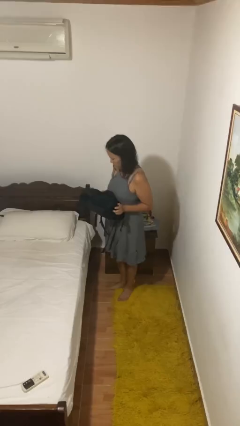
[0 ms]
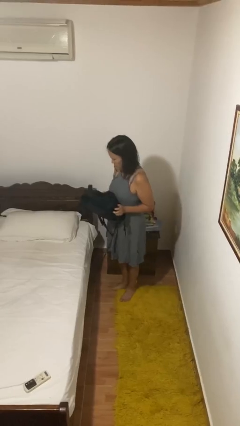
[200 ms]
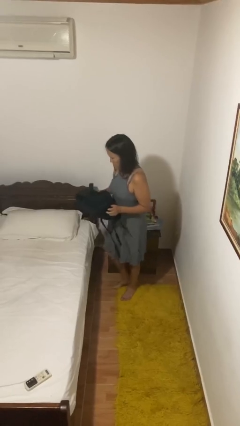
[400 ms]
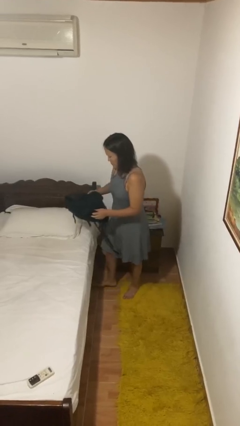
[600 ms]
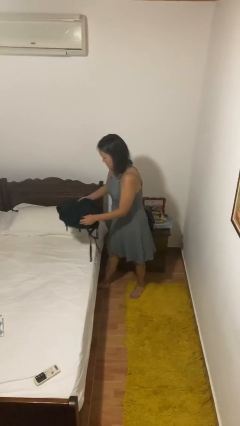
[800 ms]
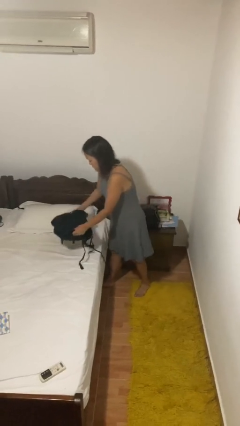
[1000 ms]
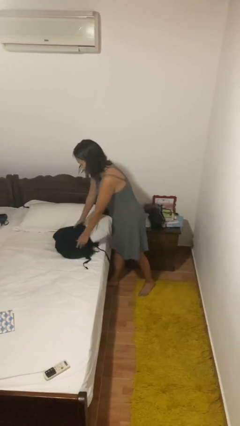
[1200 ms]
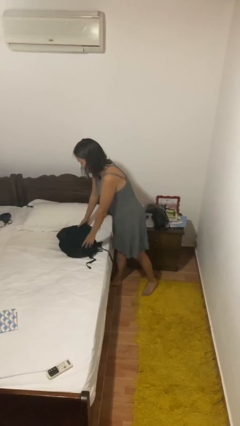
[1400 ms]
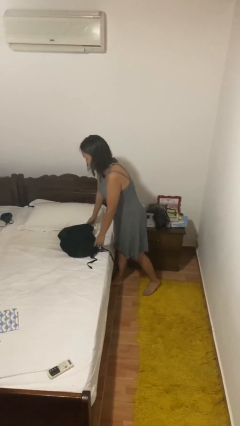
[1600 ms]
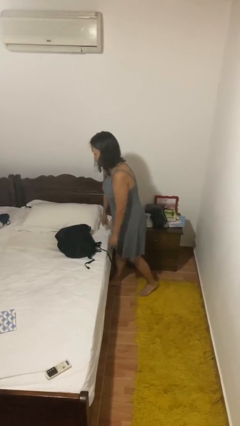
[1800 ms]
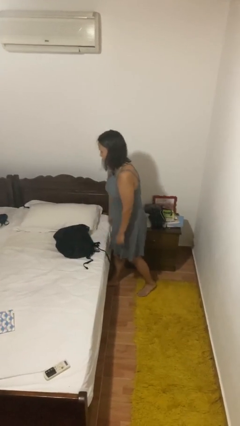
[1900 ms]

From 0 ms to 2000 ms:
person puts down object on bed

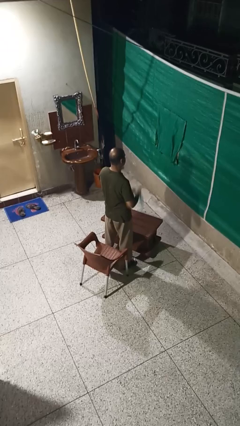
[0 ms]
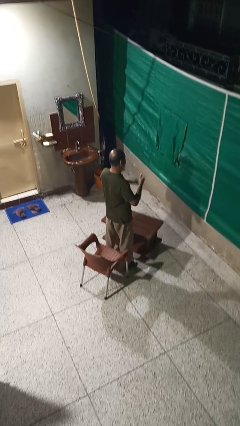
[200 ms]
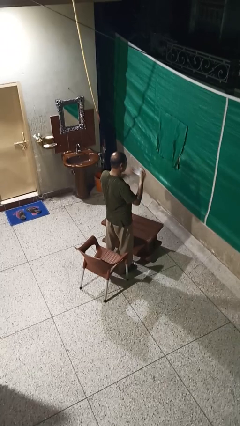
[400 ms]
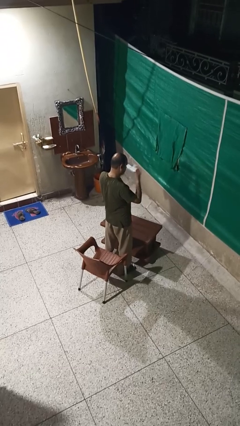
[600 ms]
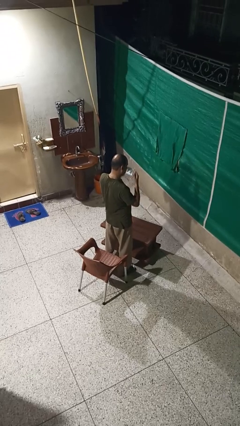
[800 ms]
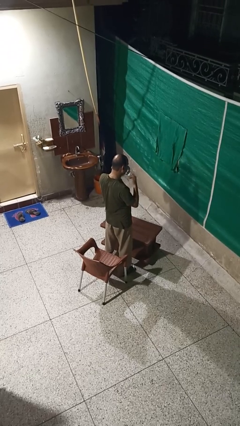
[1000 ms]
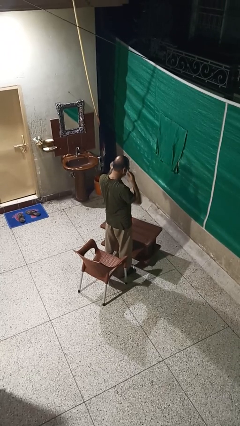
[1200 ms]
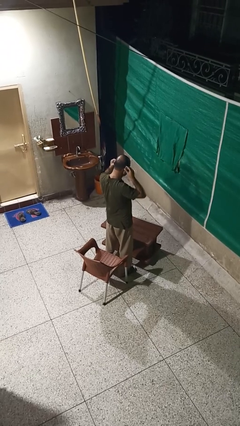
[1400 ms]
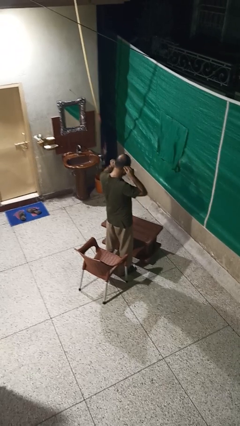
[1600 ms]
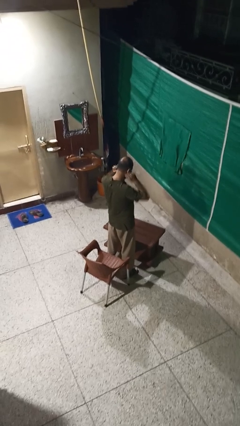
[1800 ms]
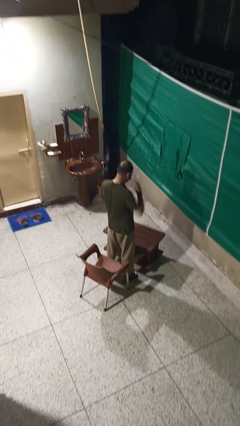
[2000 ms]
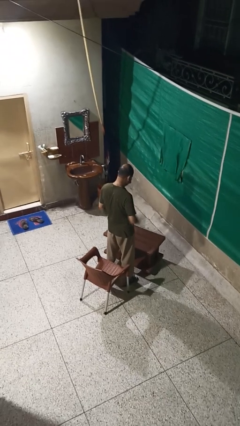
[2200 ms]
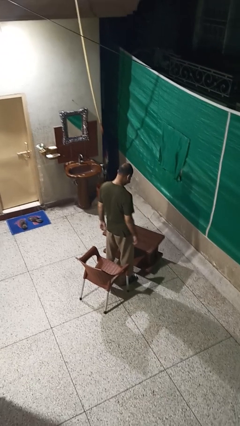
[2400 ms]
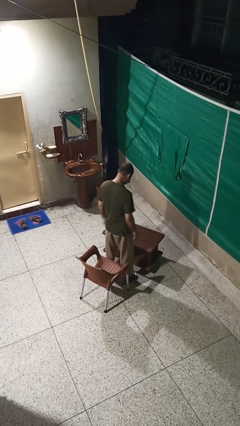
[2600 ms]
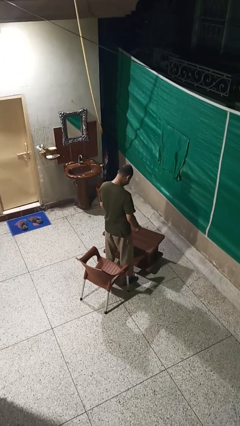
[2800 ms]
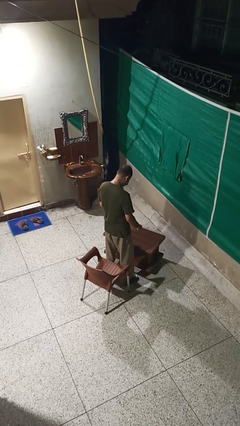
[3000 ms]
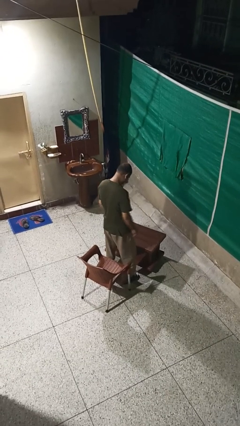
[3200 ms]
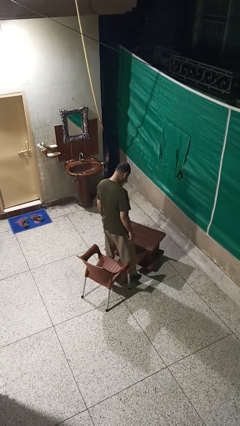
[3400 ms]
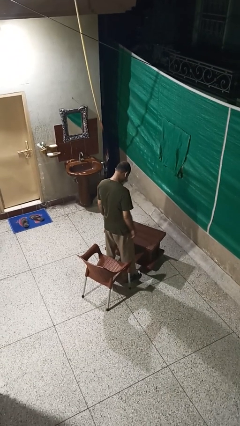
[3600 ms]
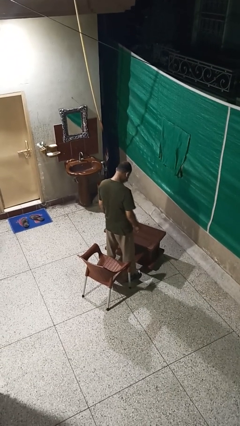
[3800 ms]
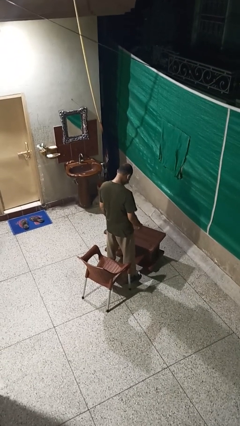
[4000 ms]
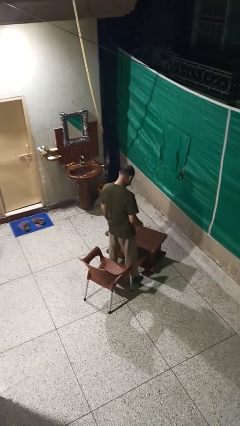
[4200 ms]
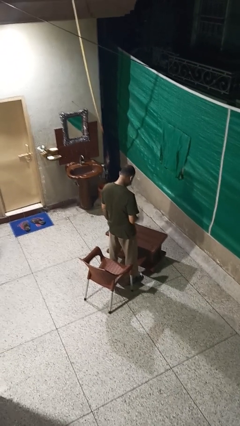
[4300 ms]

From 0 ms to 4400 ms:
person puts on facemask

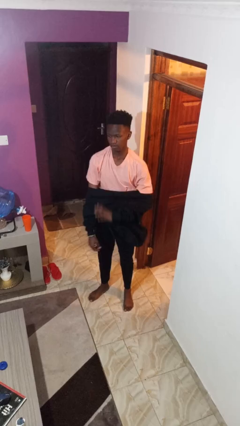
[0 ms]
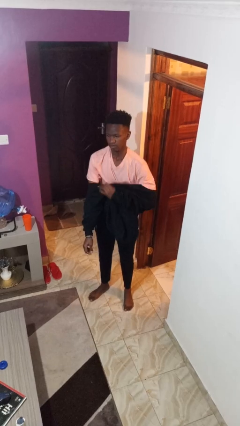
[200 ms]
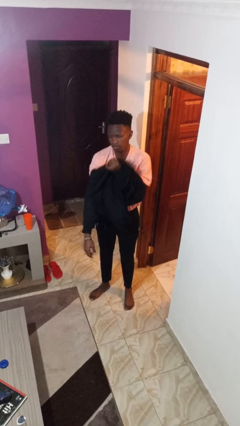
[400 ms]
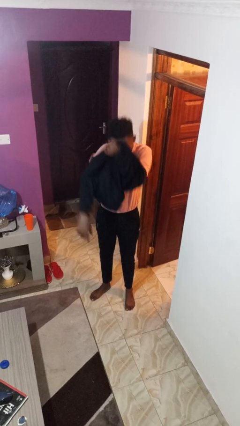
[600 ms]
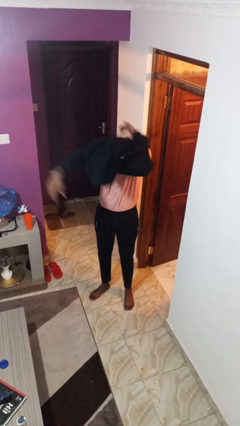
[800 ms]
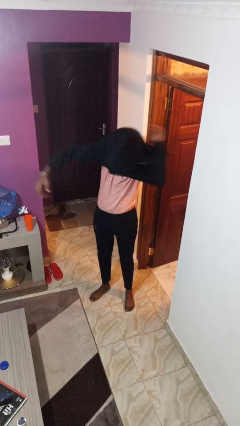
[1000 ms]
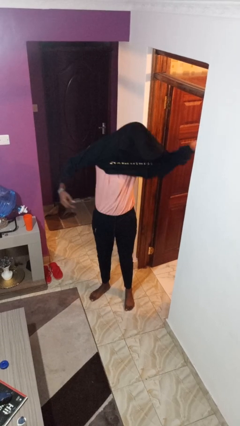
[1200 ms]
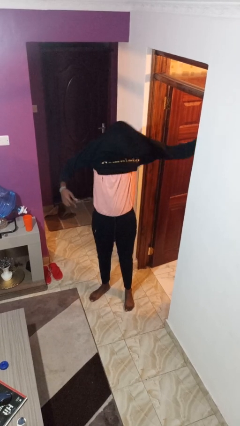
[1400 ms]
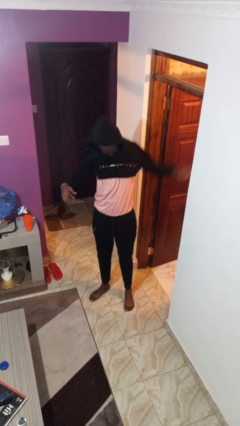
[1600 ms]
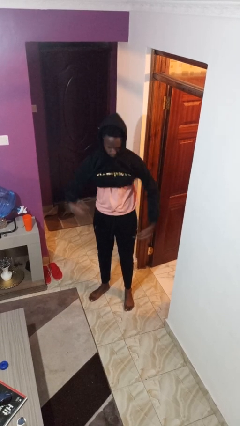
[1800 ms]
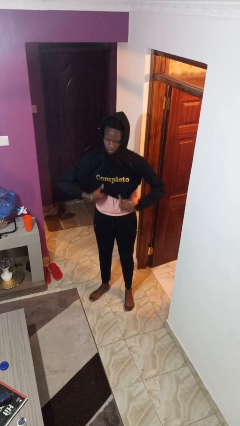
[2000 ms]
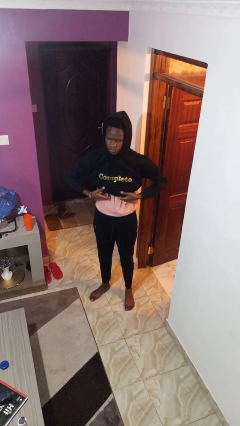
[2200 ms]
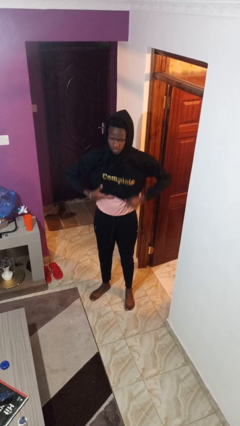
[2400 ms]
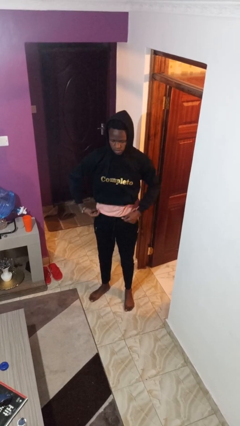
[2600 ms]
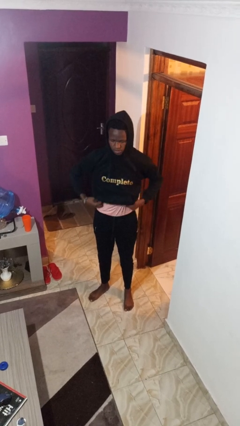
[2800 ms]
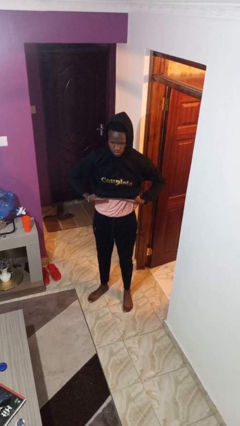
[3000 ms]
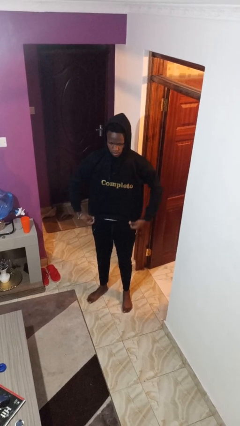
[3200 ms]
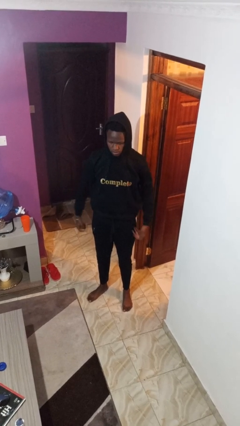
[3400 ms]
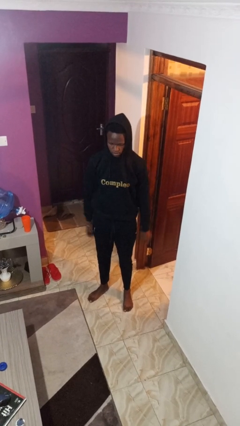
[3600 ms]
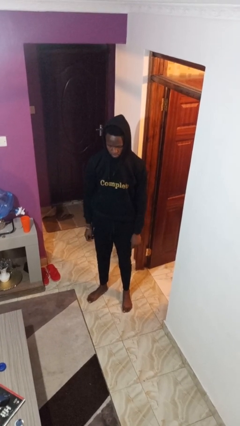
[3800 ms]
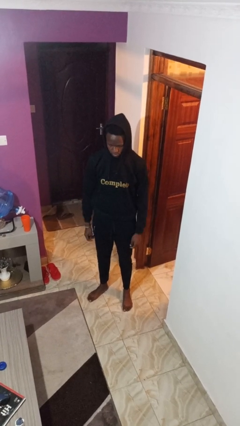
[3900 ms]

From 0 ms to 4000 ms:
person puts on hoodie

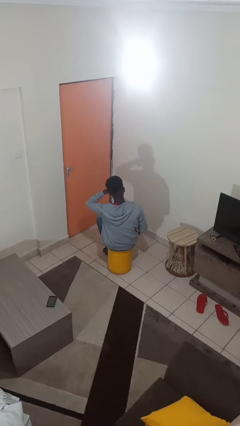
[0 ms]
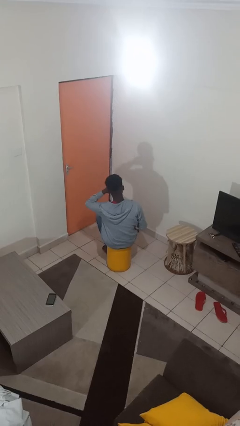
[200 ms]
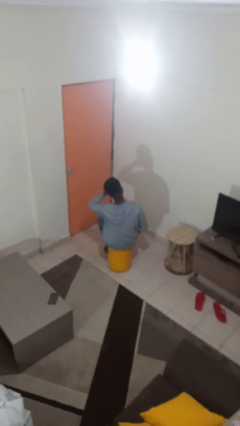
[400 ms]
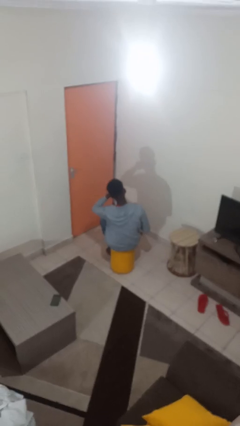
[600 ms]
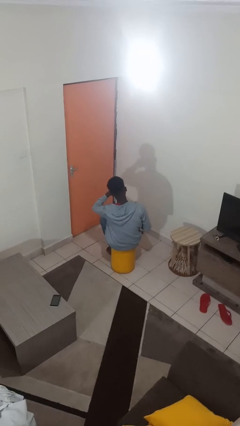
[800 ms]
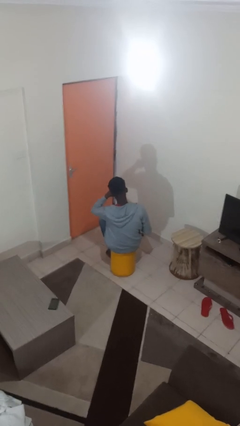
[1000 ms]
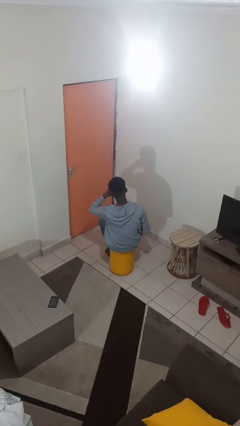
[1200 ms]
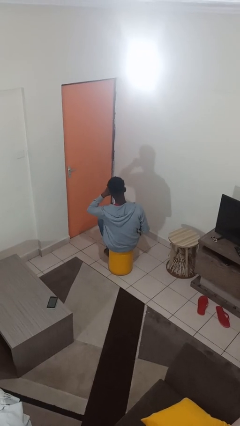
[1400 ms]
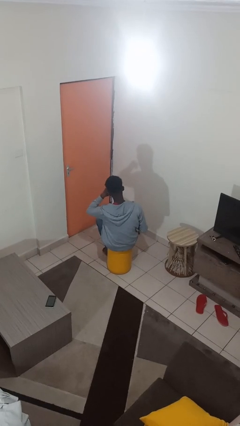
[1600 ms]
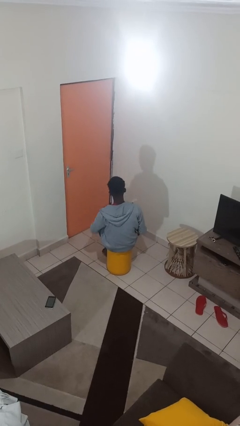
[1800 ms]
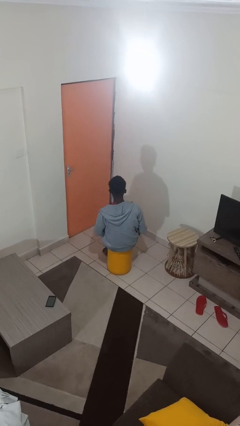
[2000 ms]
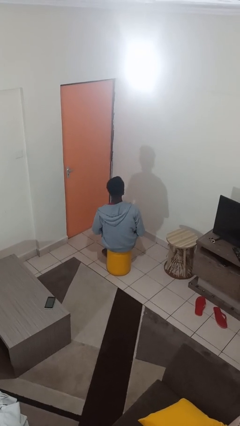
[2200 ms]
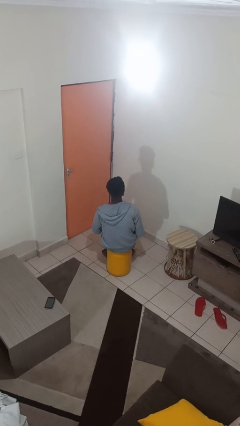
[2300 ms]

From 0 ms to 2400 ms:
person rubs eyes

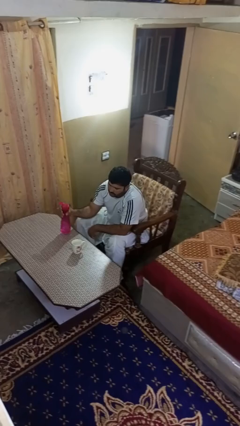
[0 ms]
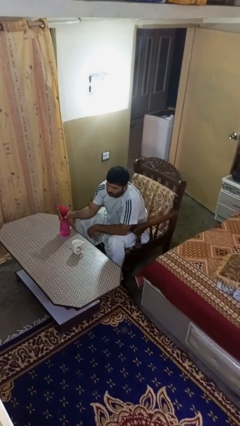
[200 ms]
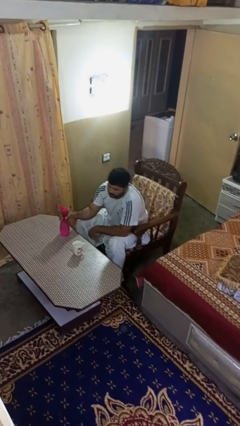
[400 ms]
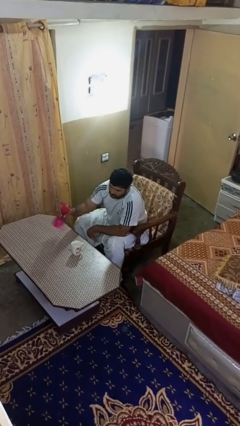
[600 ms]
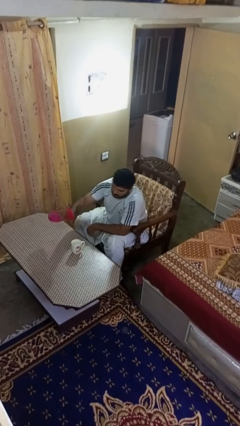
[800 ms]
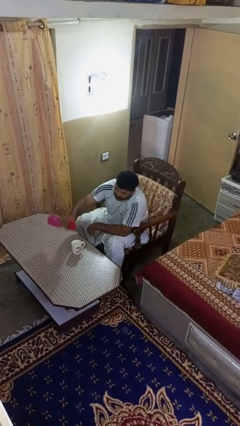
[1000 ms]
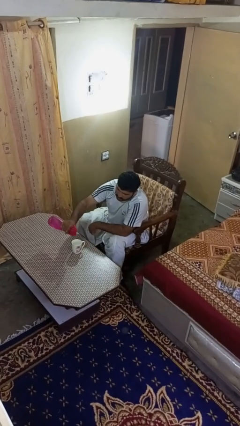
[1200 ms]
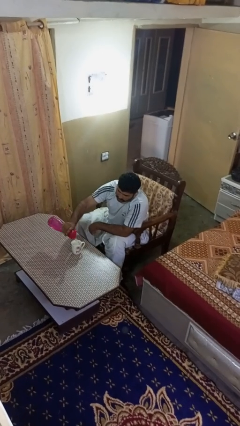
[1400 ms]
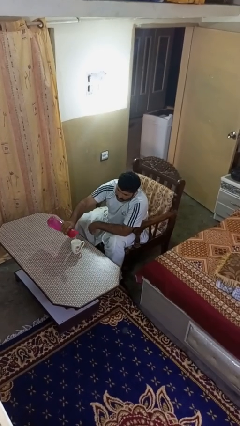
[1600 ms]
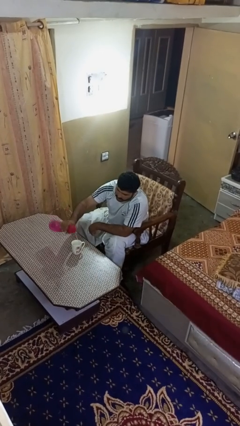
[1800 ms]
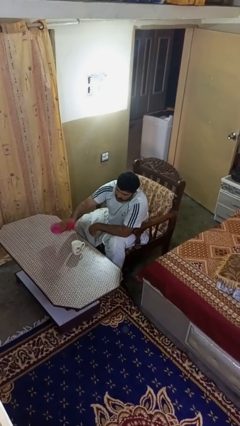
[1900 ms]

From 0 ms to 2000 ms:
person pours liquid into cup

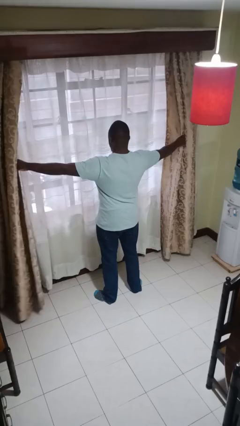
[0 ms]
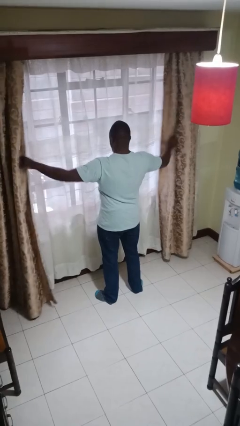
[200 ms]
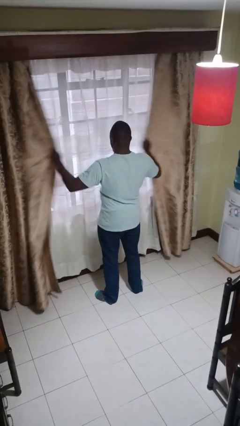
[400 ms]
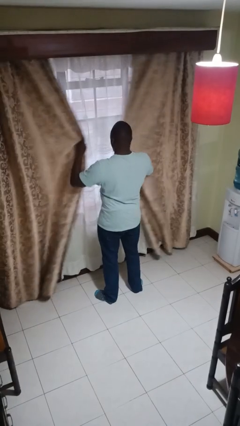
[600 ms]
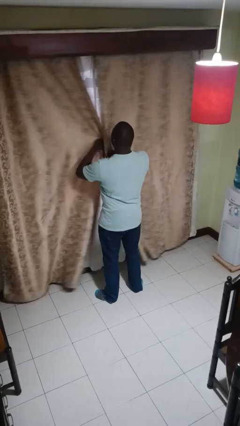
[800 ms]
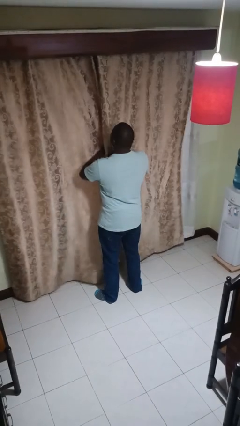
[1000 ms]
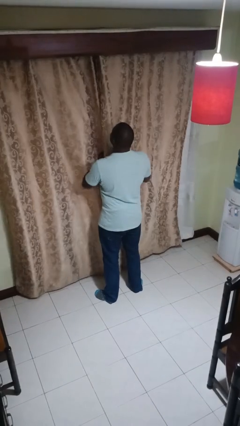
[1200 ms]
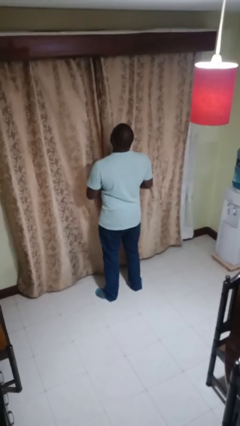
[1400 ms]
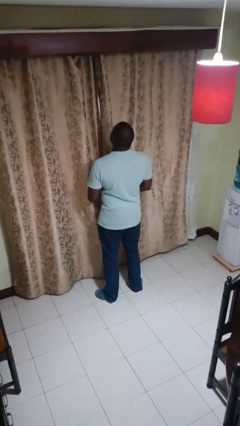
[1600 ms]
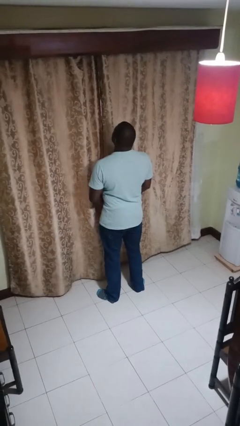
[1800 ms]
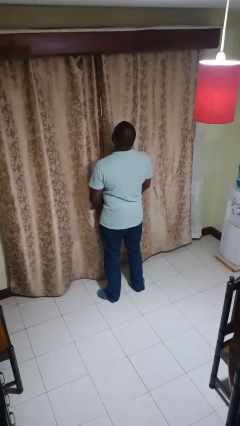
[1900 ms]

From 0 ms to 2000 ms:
person closes curtains

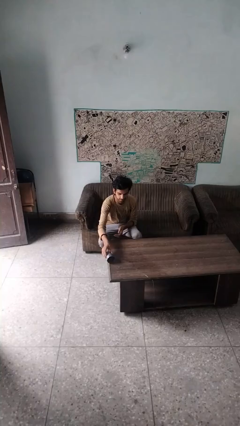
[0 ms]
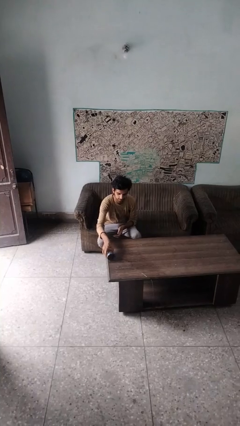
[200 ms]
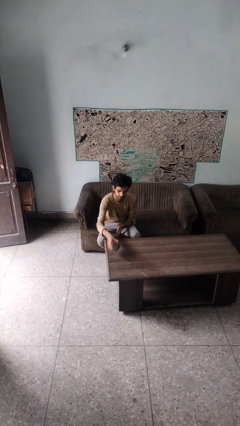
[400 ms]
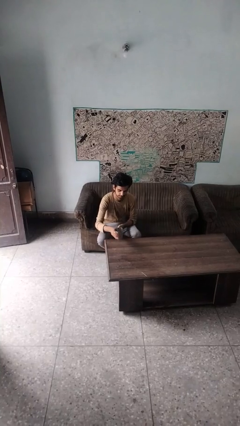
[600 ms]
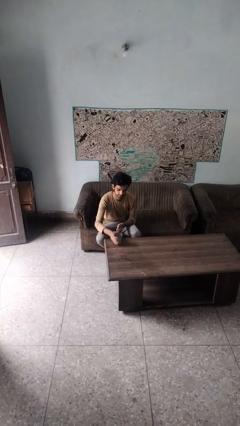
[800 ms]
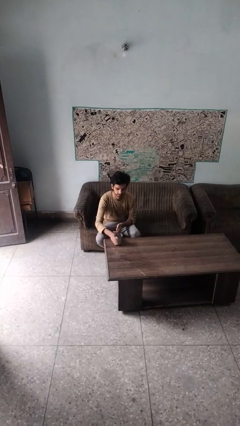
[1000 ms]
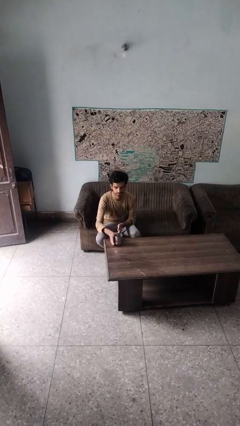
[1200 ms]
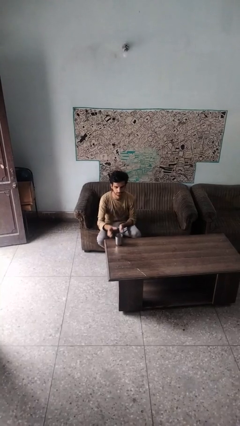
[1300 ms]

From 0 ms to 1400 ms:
person sets upright glass
